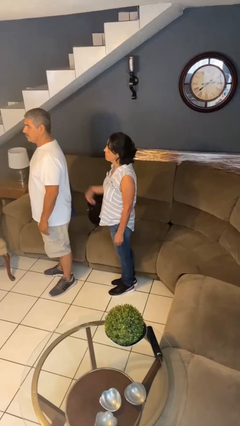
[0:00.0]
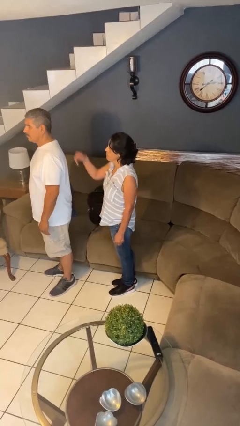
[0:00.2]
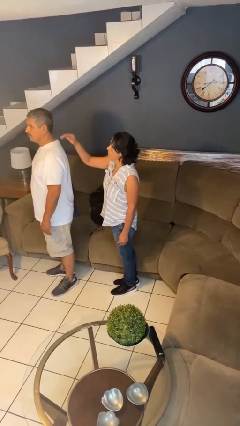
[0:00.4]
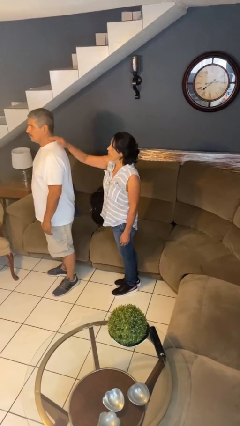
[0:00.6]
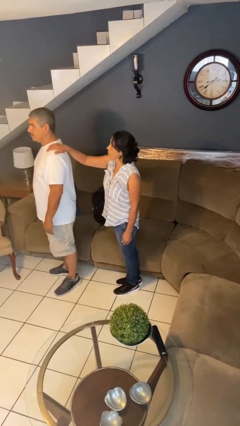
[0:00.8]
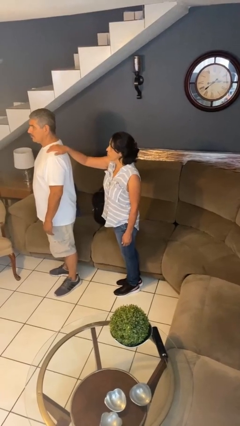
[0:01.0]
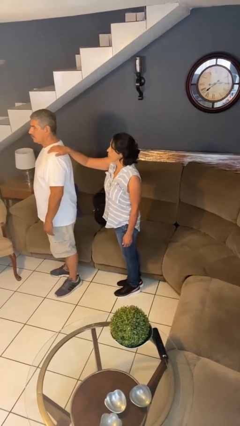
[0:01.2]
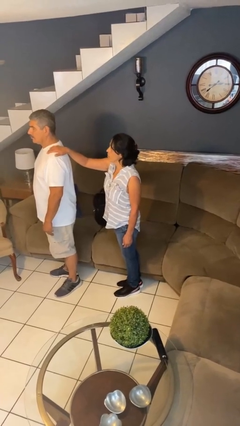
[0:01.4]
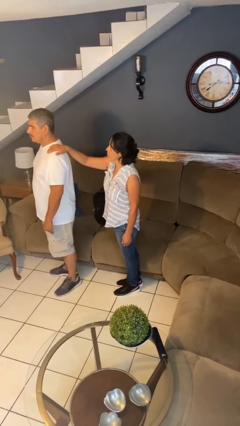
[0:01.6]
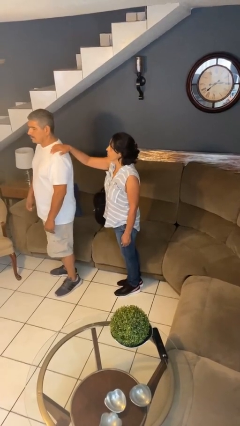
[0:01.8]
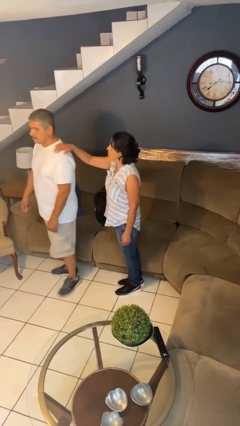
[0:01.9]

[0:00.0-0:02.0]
person grabs person by shoulder

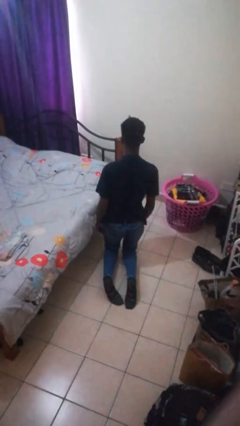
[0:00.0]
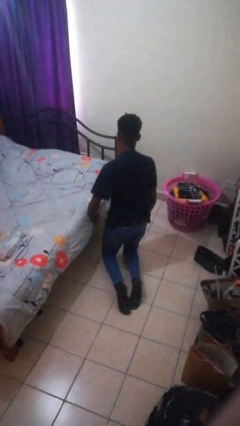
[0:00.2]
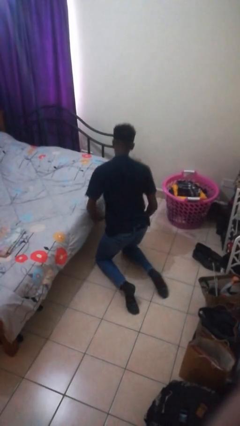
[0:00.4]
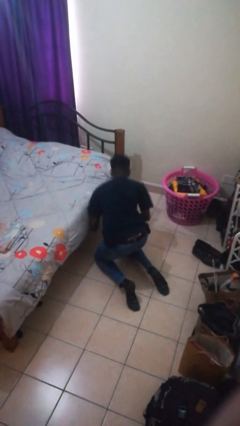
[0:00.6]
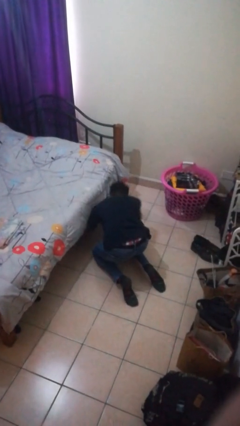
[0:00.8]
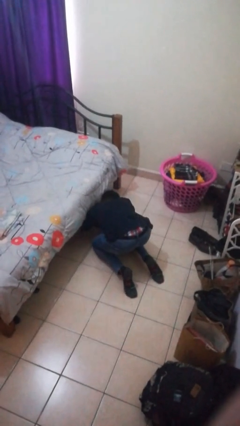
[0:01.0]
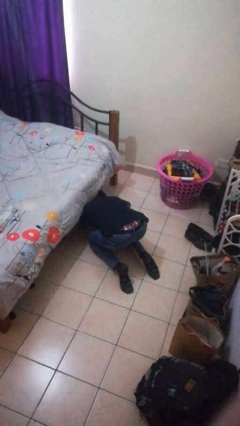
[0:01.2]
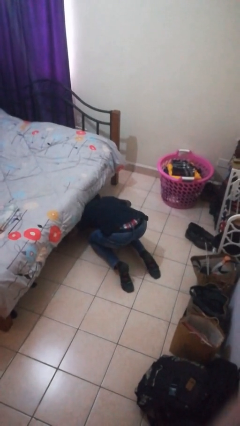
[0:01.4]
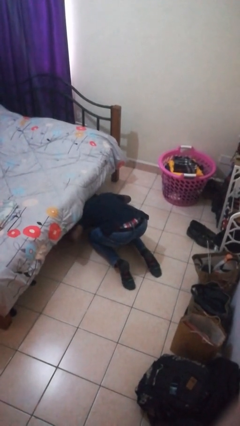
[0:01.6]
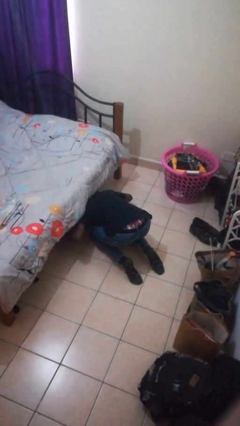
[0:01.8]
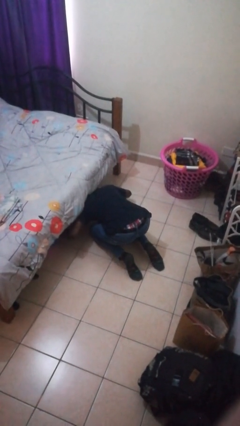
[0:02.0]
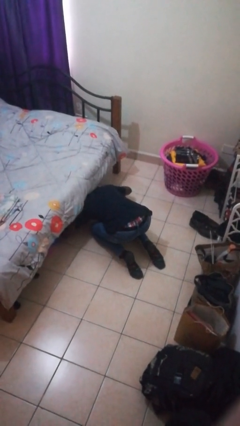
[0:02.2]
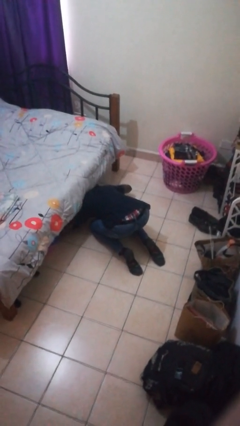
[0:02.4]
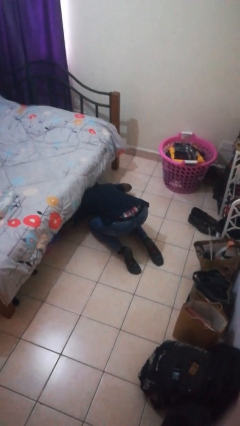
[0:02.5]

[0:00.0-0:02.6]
person searches under bed

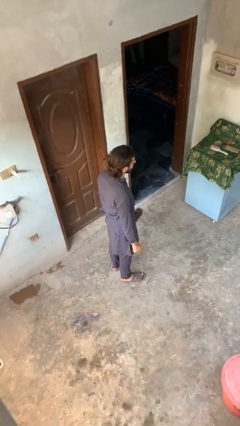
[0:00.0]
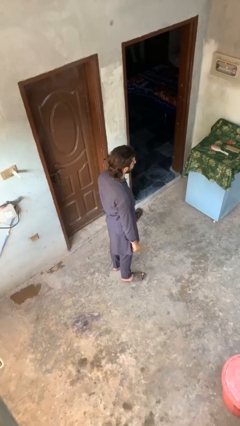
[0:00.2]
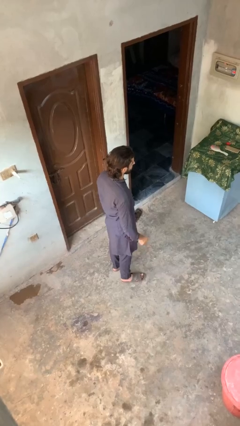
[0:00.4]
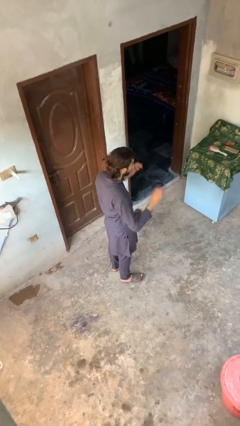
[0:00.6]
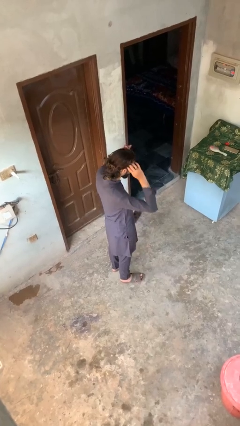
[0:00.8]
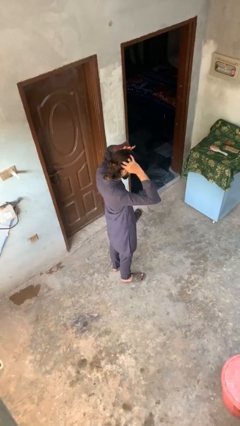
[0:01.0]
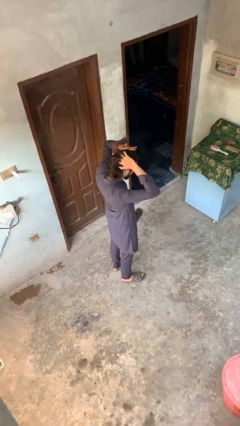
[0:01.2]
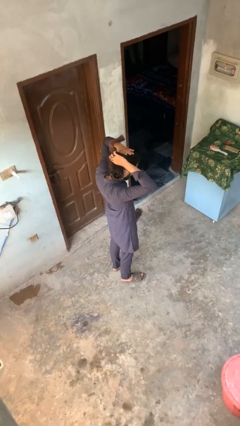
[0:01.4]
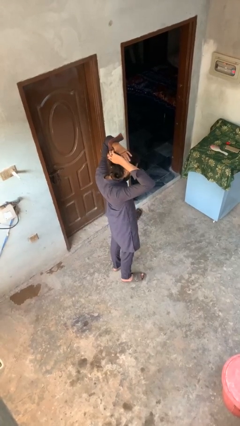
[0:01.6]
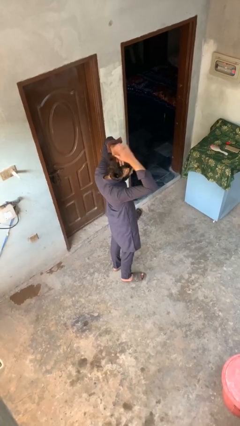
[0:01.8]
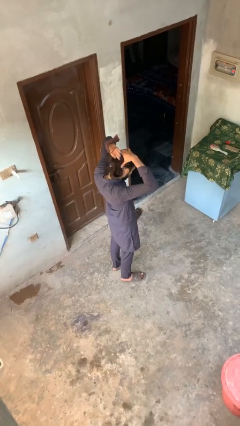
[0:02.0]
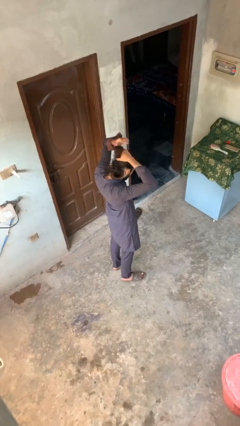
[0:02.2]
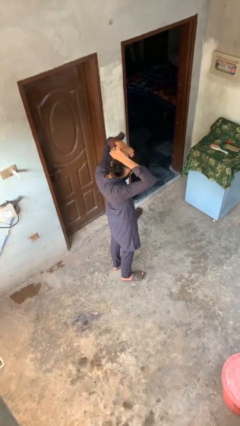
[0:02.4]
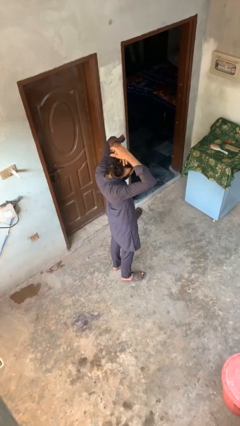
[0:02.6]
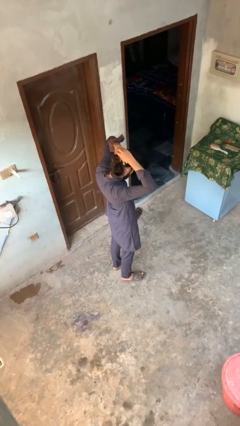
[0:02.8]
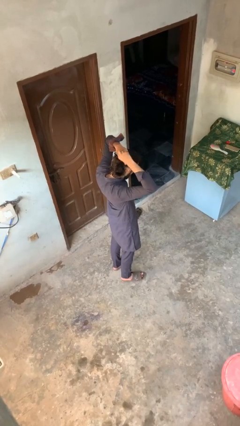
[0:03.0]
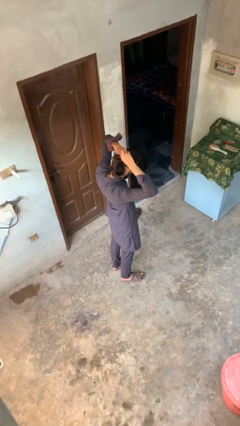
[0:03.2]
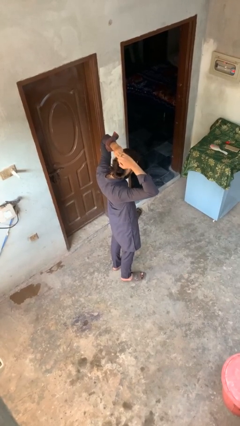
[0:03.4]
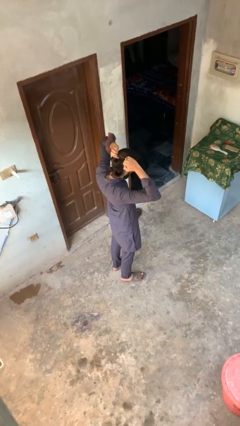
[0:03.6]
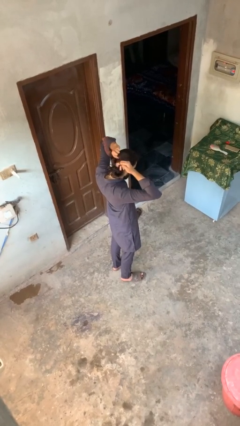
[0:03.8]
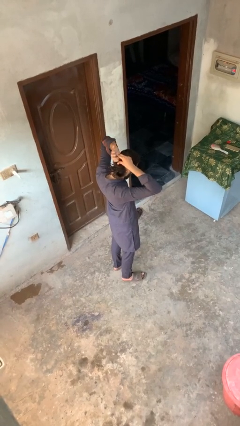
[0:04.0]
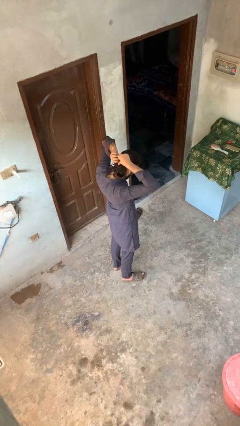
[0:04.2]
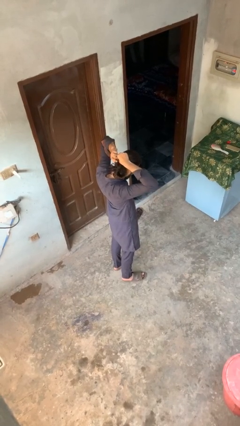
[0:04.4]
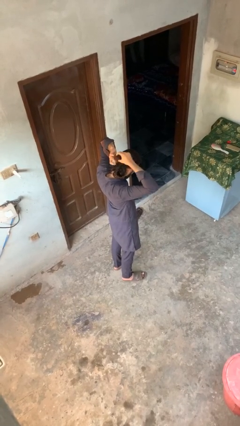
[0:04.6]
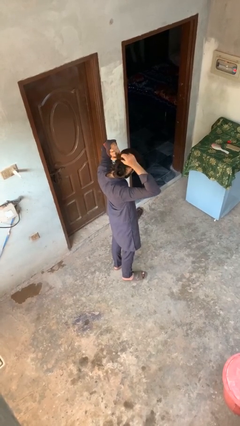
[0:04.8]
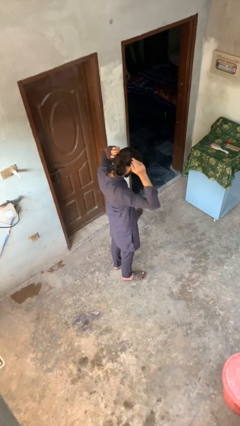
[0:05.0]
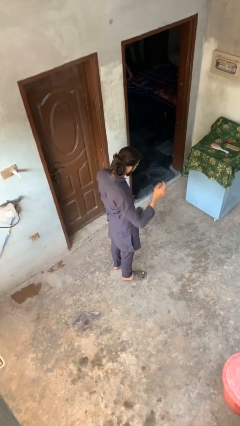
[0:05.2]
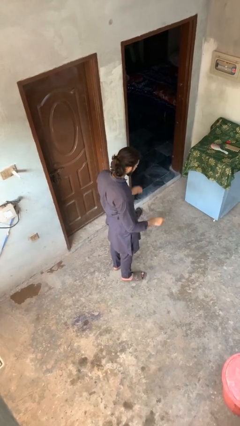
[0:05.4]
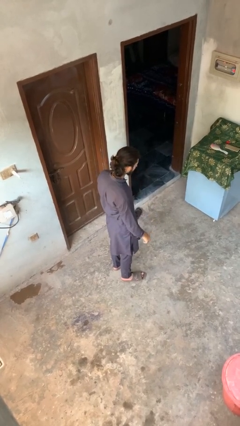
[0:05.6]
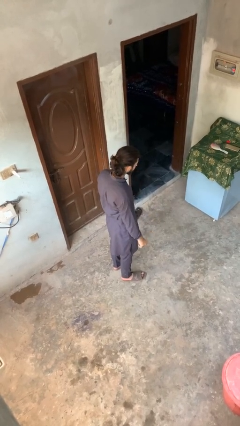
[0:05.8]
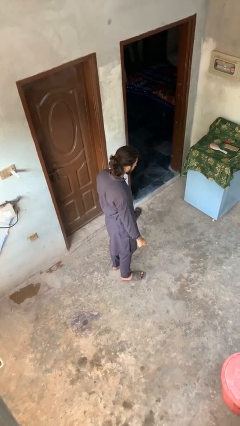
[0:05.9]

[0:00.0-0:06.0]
person puts hair in ponytail

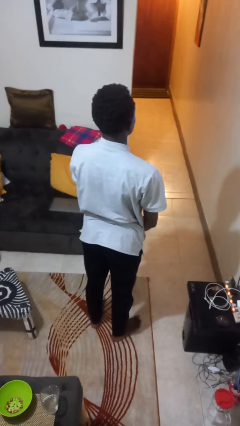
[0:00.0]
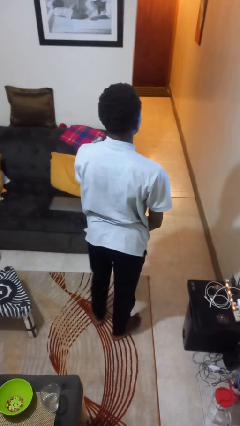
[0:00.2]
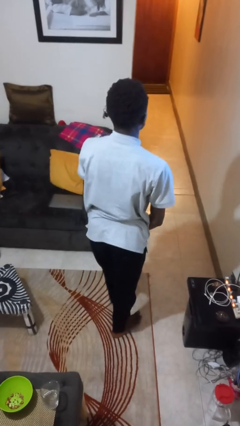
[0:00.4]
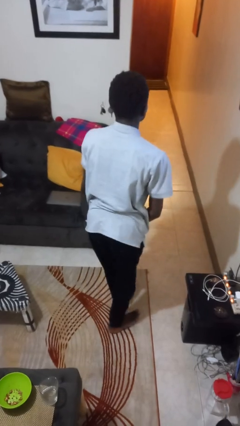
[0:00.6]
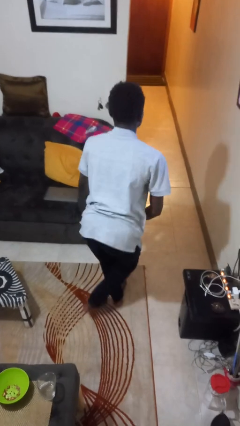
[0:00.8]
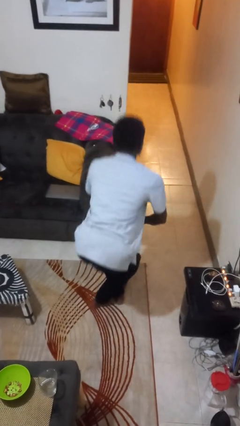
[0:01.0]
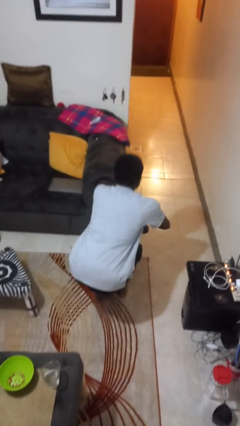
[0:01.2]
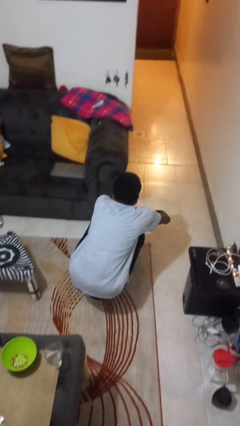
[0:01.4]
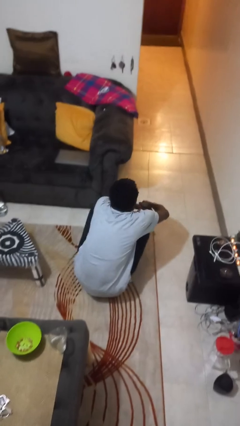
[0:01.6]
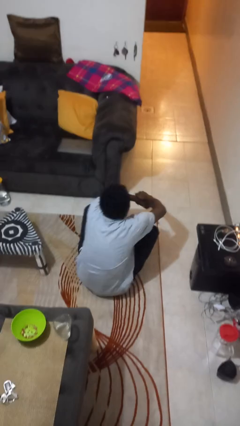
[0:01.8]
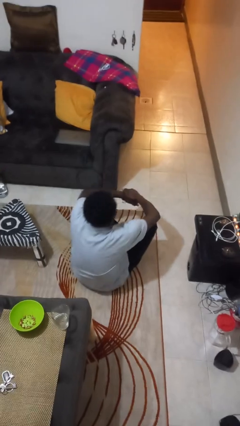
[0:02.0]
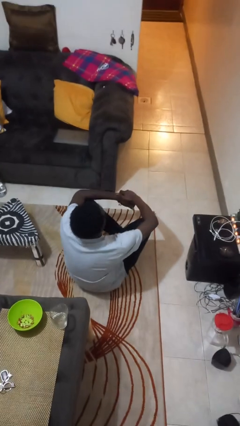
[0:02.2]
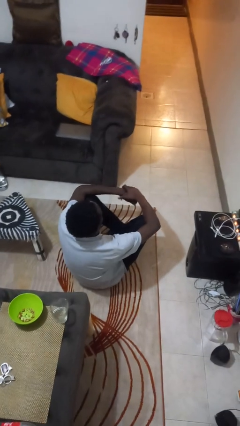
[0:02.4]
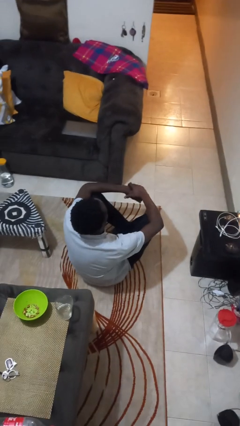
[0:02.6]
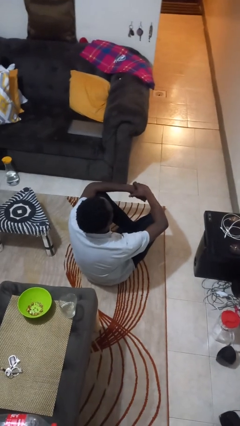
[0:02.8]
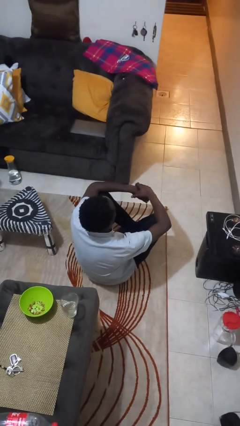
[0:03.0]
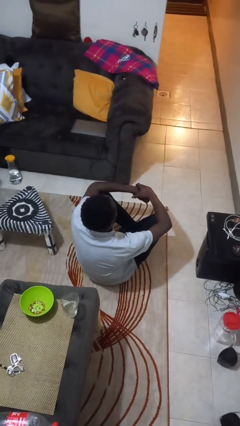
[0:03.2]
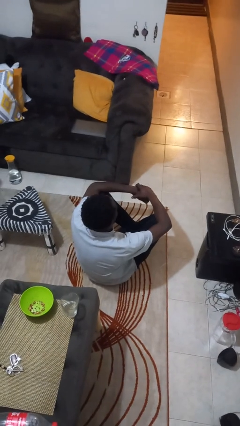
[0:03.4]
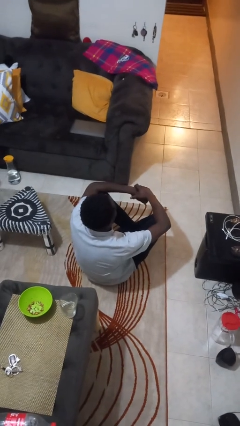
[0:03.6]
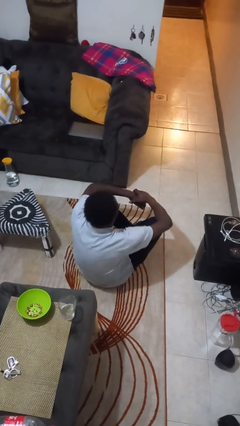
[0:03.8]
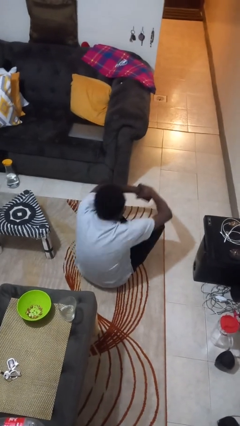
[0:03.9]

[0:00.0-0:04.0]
person sits crisscross

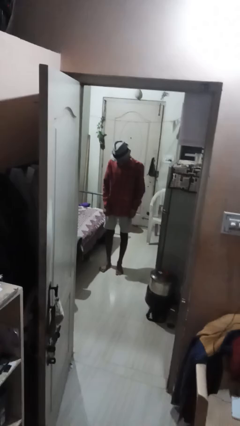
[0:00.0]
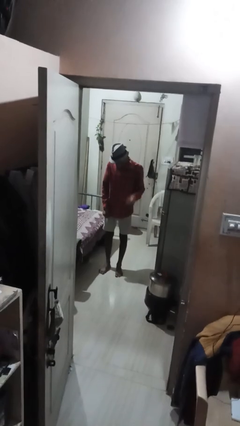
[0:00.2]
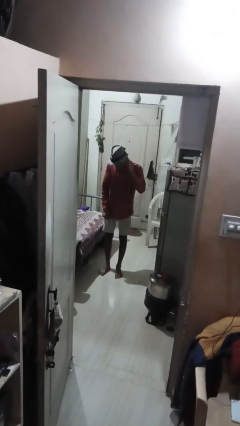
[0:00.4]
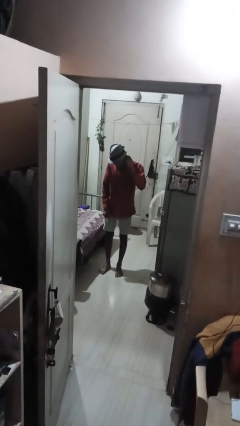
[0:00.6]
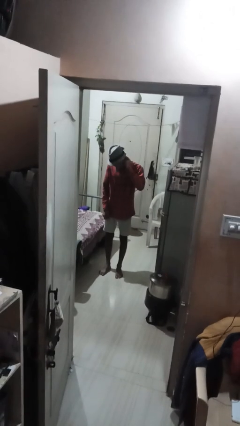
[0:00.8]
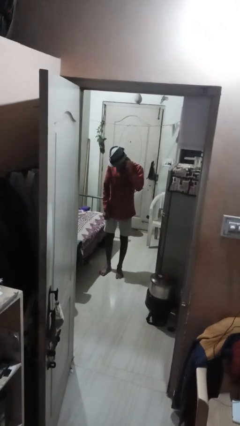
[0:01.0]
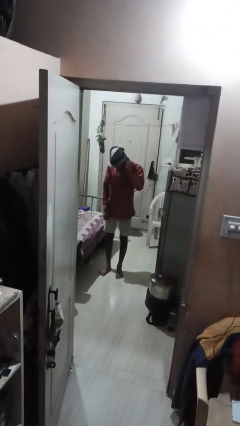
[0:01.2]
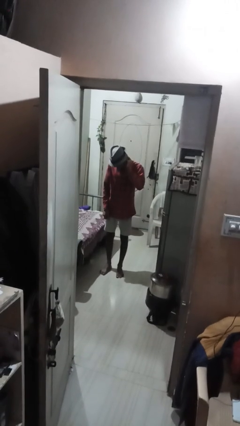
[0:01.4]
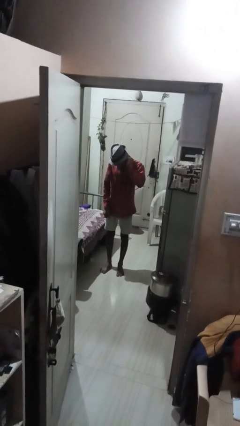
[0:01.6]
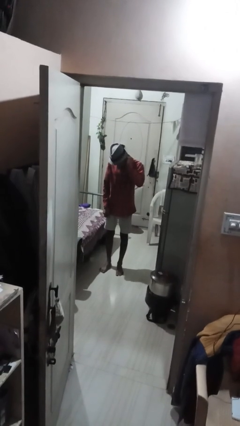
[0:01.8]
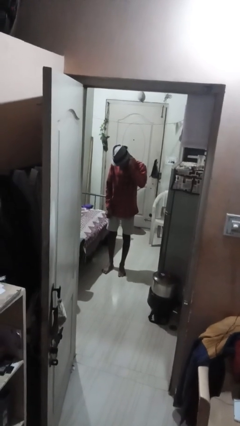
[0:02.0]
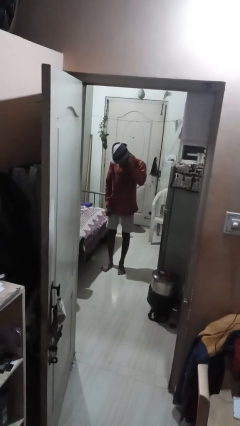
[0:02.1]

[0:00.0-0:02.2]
person touches earlobe

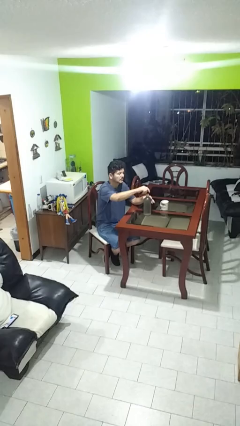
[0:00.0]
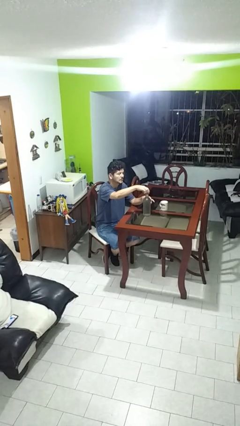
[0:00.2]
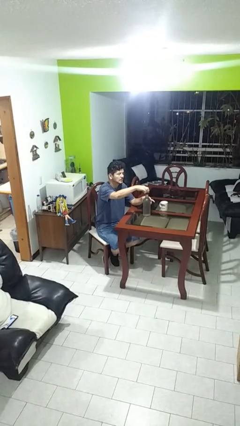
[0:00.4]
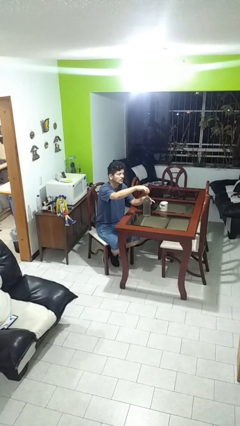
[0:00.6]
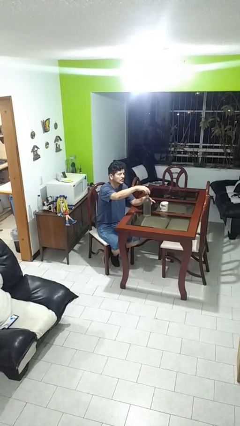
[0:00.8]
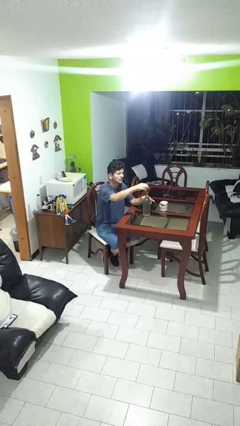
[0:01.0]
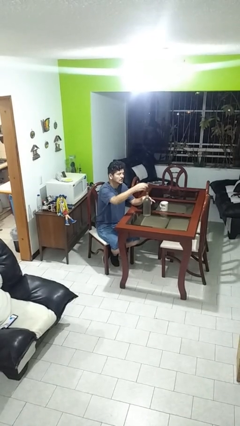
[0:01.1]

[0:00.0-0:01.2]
person unscrews lid from bottle
